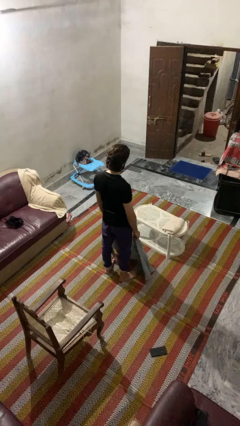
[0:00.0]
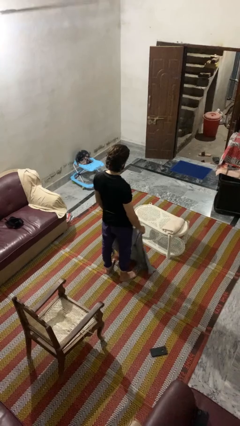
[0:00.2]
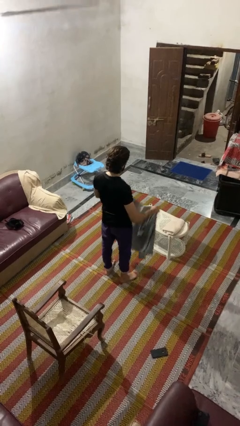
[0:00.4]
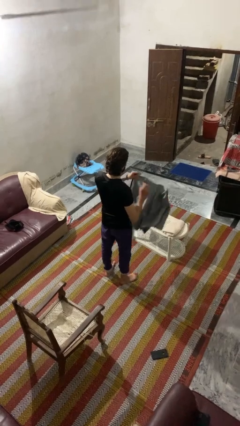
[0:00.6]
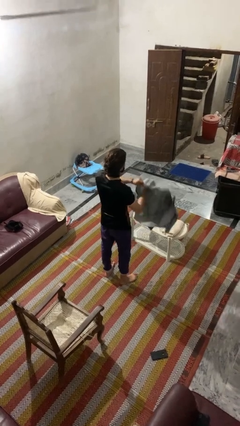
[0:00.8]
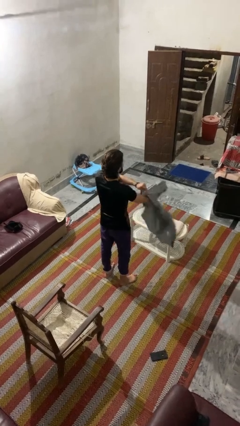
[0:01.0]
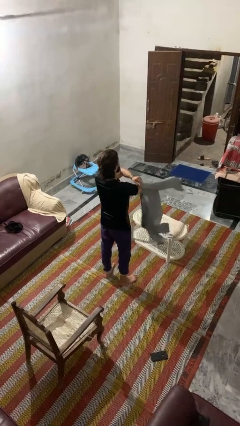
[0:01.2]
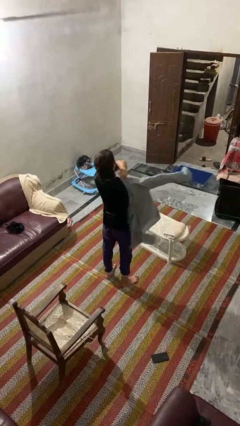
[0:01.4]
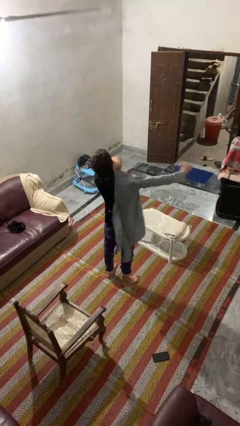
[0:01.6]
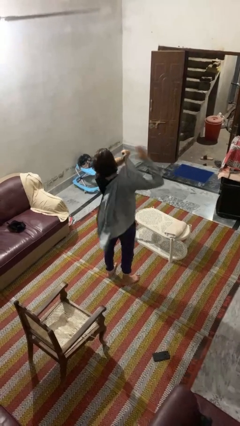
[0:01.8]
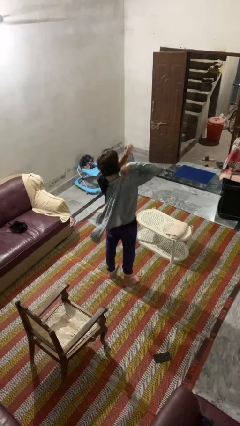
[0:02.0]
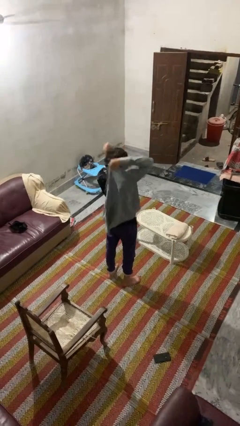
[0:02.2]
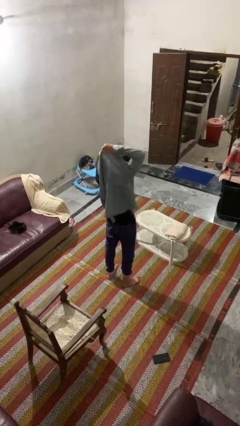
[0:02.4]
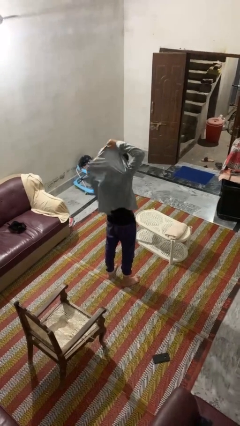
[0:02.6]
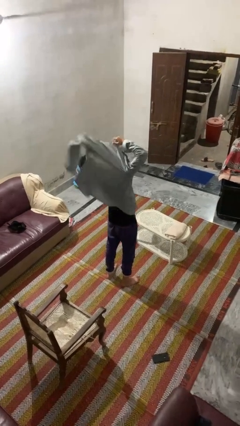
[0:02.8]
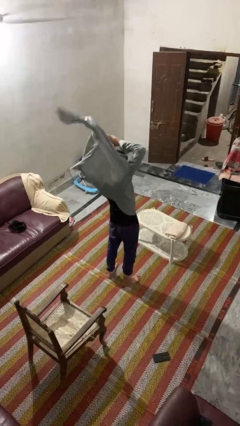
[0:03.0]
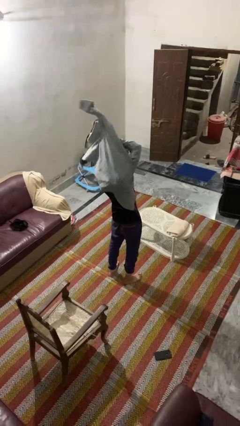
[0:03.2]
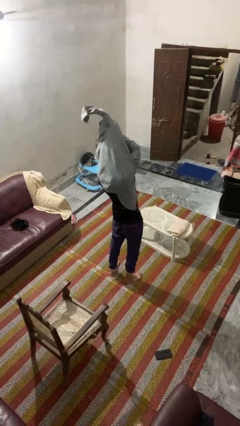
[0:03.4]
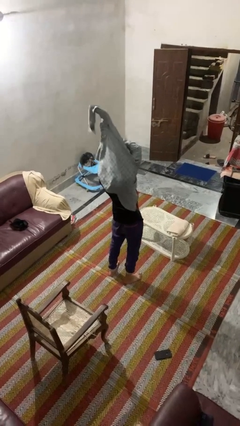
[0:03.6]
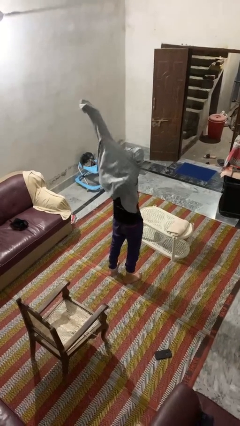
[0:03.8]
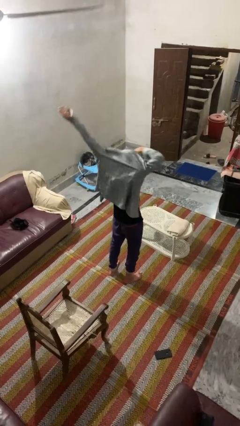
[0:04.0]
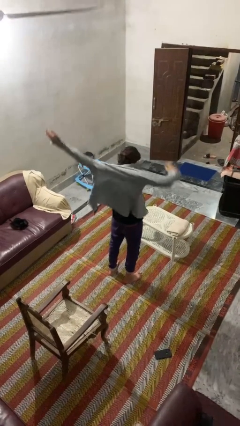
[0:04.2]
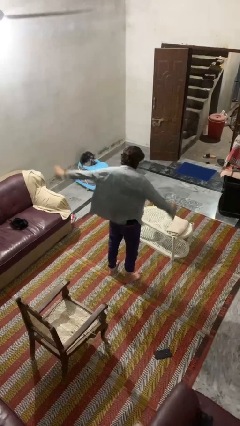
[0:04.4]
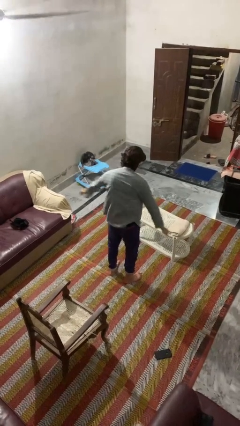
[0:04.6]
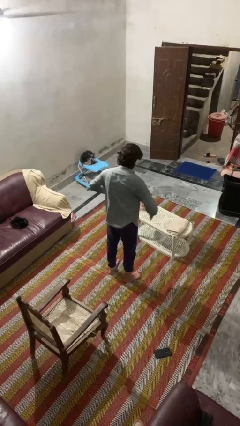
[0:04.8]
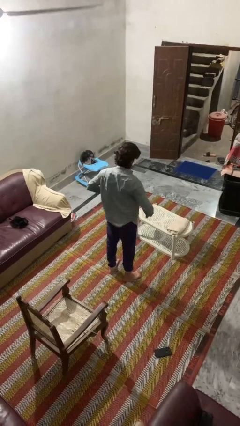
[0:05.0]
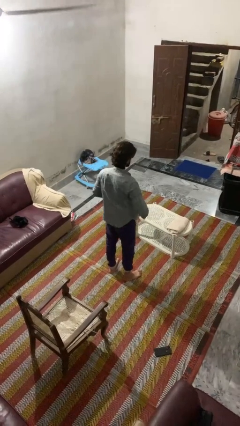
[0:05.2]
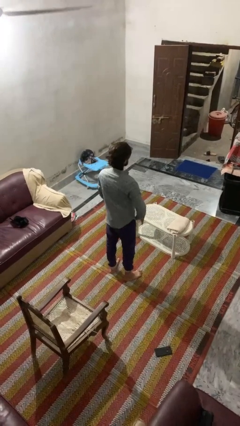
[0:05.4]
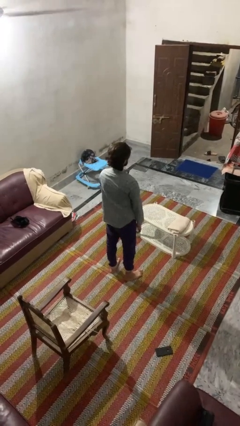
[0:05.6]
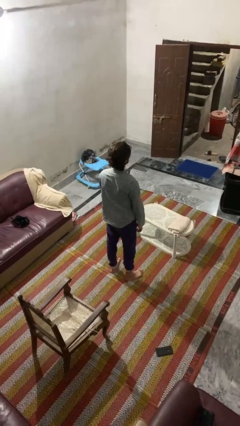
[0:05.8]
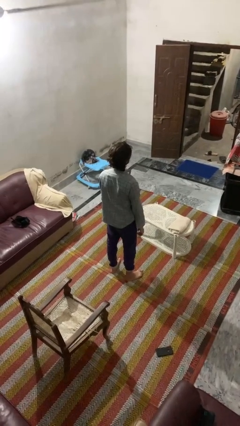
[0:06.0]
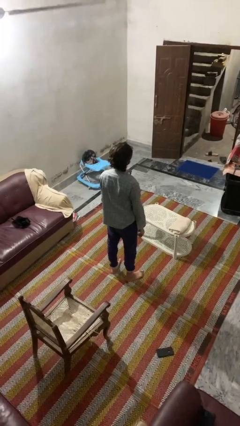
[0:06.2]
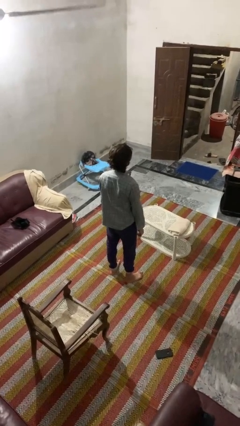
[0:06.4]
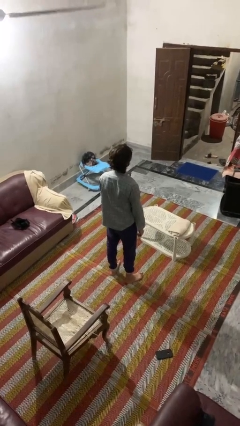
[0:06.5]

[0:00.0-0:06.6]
person puts on shirt

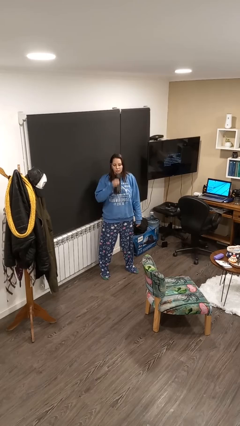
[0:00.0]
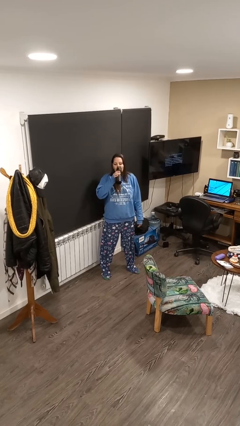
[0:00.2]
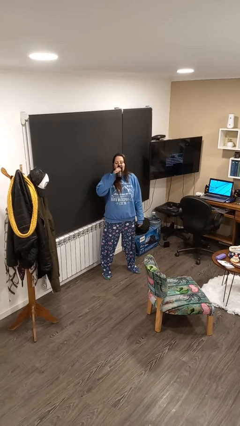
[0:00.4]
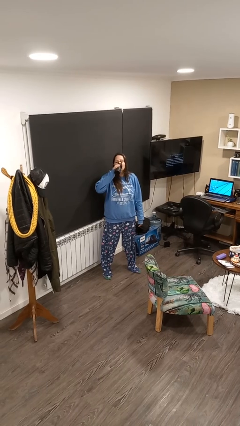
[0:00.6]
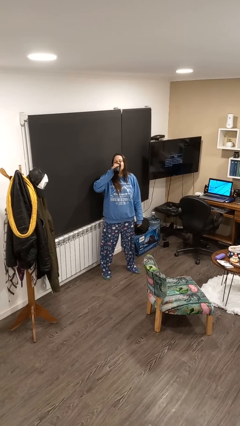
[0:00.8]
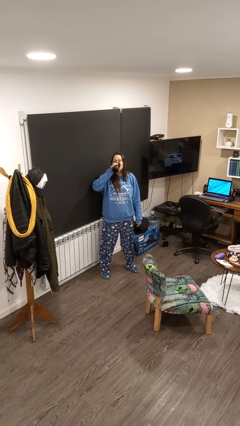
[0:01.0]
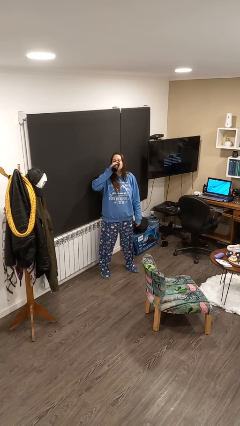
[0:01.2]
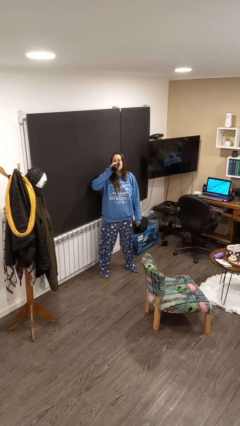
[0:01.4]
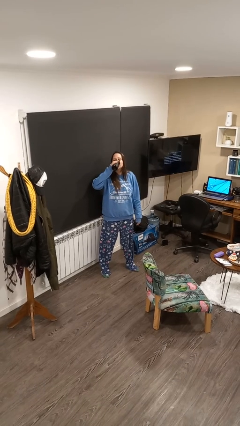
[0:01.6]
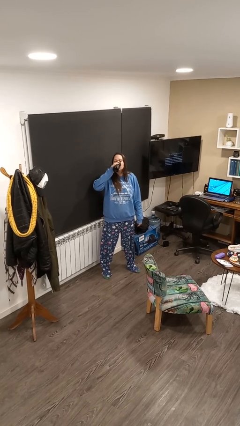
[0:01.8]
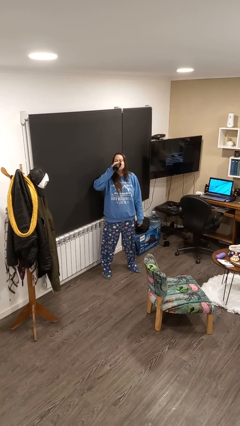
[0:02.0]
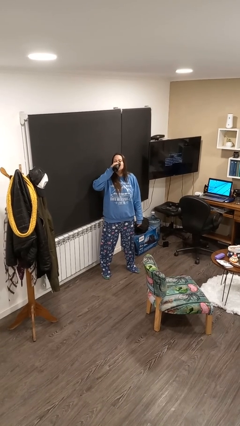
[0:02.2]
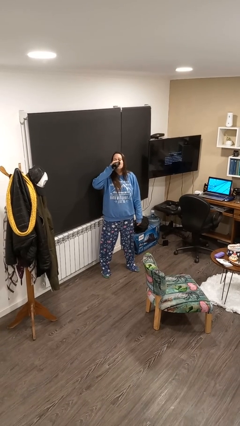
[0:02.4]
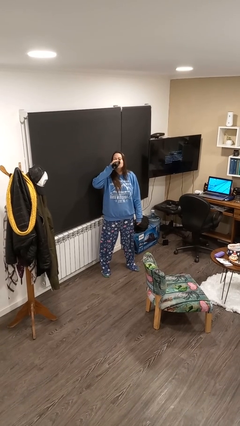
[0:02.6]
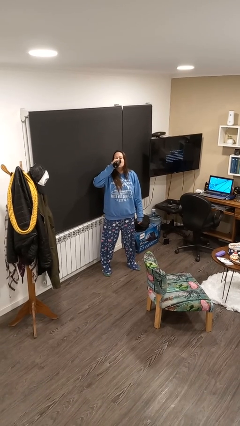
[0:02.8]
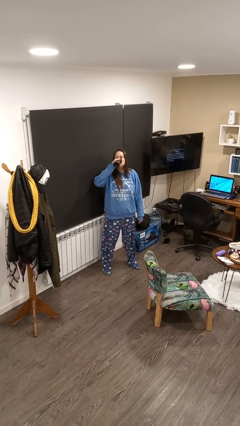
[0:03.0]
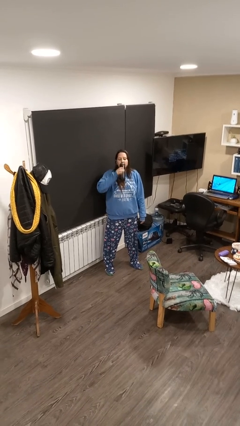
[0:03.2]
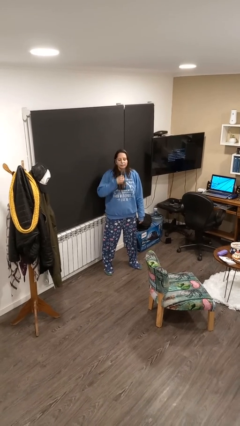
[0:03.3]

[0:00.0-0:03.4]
person drinks from bottle

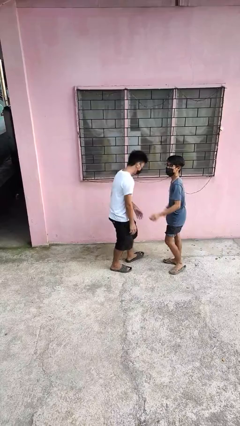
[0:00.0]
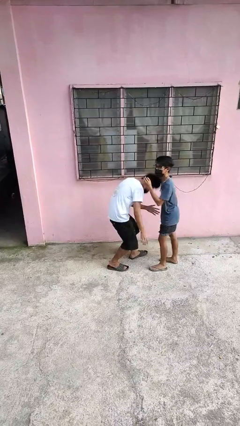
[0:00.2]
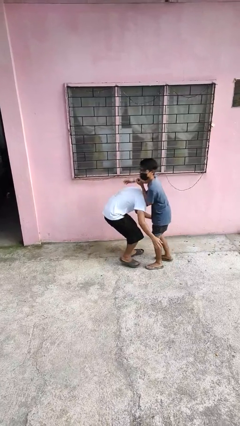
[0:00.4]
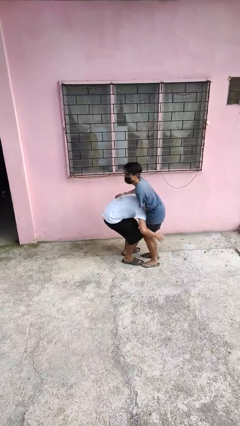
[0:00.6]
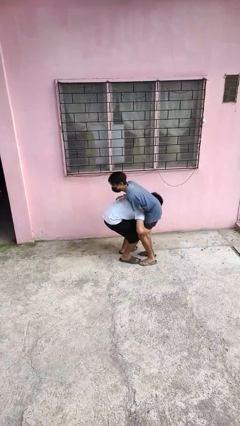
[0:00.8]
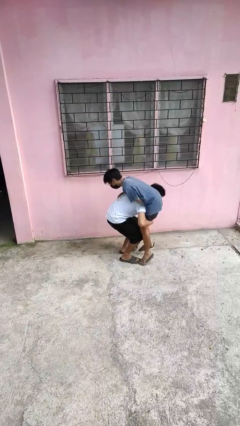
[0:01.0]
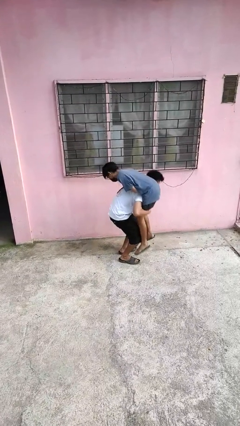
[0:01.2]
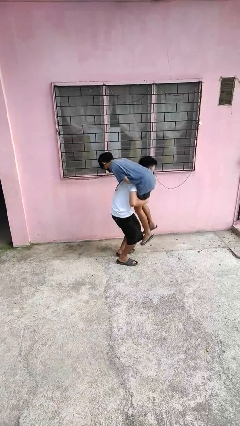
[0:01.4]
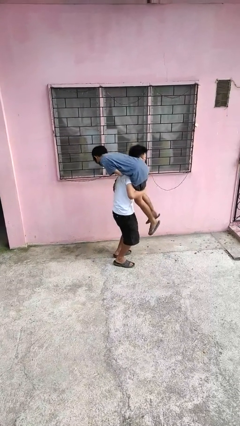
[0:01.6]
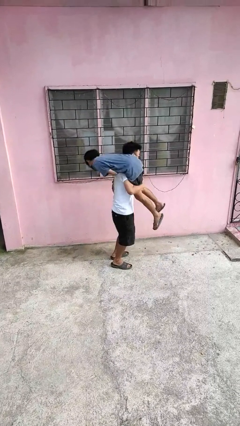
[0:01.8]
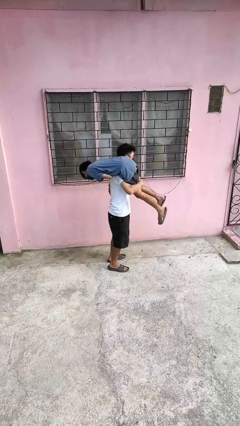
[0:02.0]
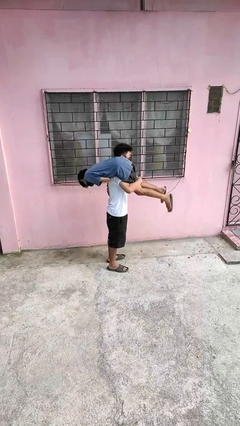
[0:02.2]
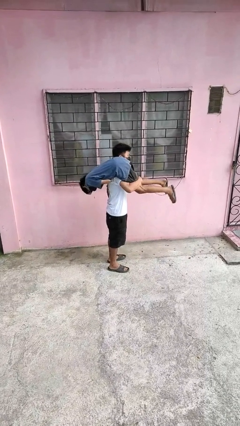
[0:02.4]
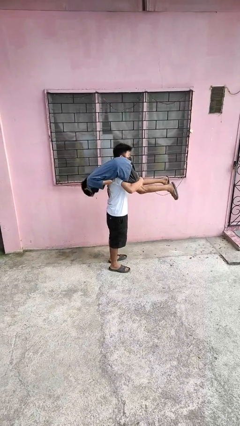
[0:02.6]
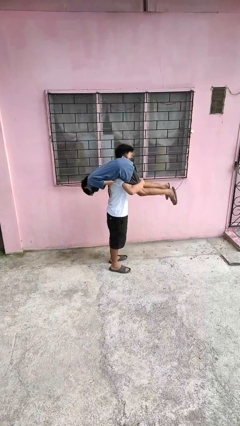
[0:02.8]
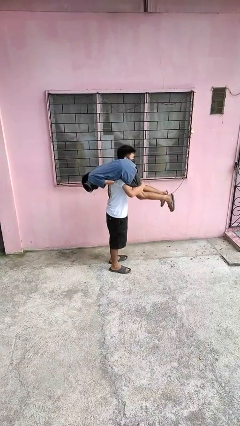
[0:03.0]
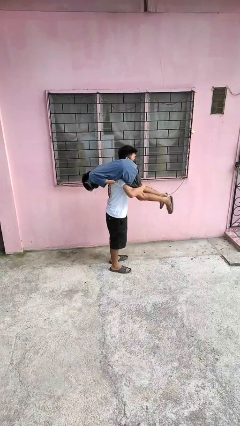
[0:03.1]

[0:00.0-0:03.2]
person carries person over shoulder

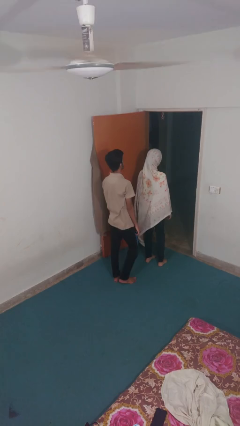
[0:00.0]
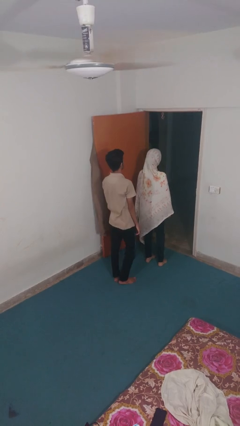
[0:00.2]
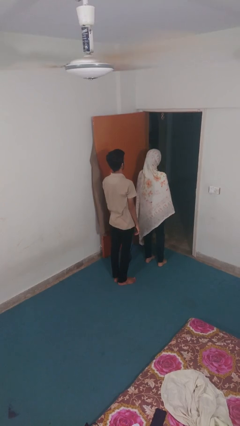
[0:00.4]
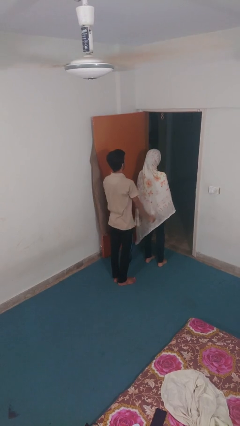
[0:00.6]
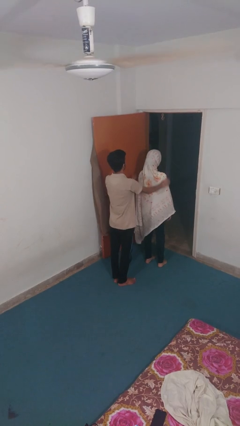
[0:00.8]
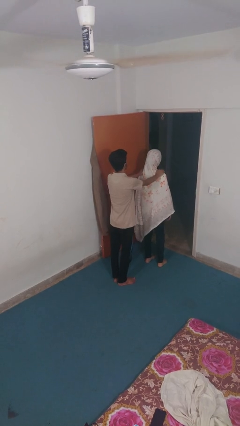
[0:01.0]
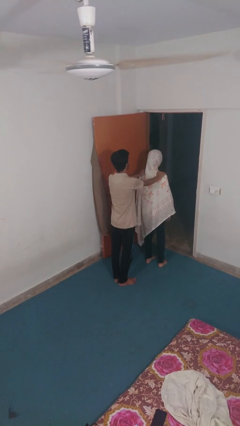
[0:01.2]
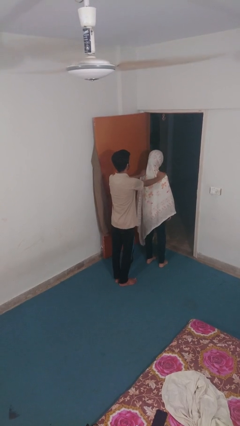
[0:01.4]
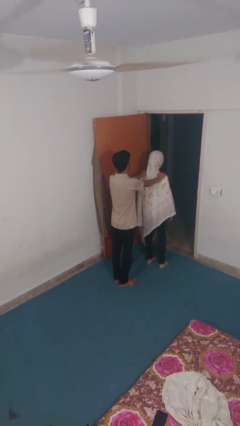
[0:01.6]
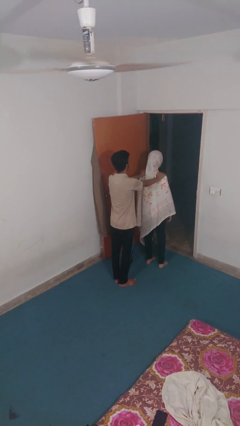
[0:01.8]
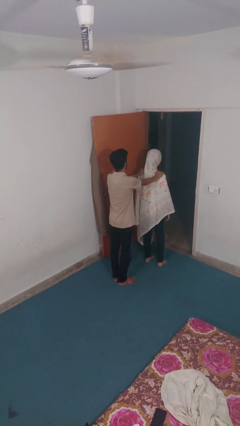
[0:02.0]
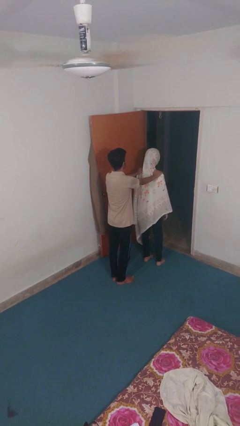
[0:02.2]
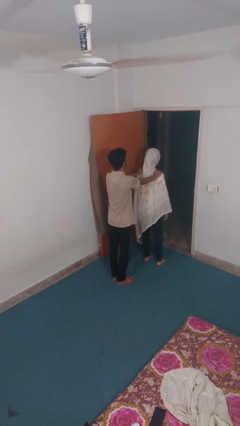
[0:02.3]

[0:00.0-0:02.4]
person grabs person by shoulder

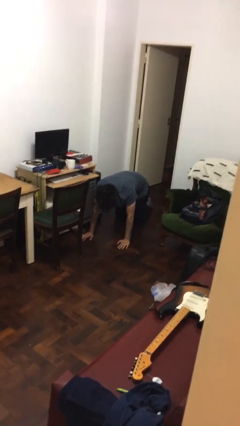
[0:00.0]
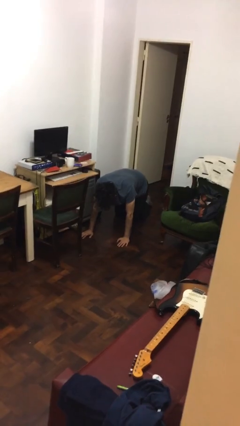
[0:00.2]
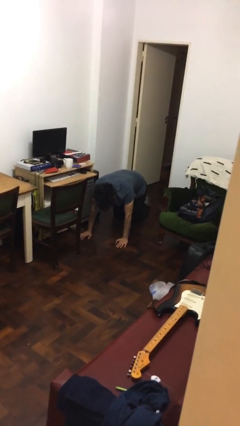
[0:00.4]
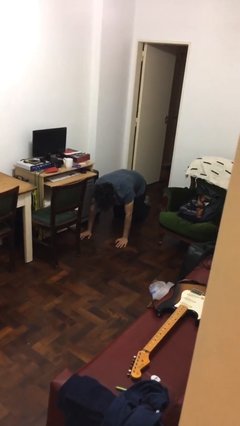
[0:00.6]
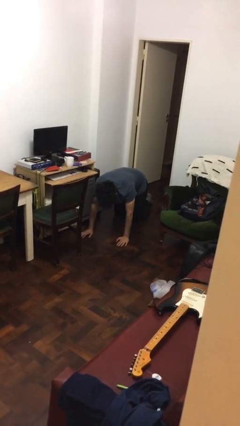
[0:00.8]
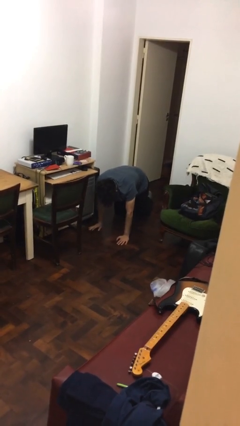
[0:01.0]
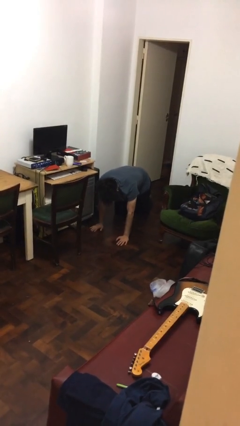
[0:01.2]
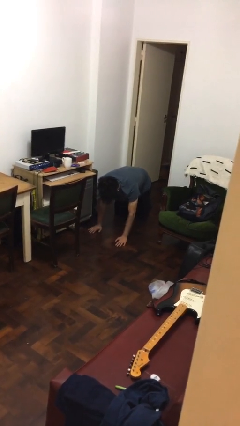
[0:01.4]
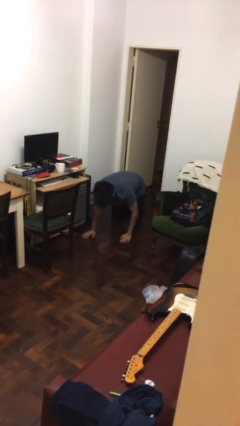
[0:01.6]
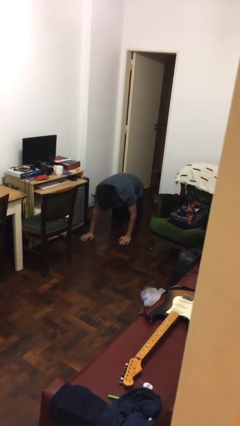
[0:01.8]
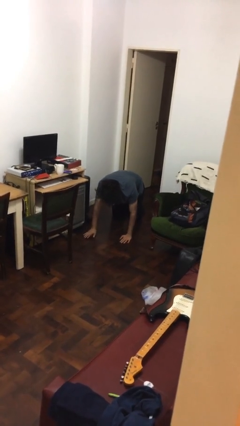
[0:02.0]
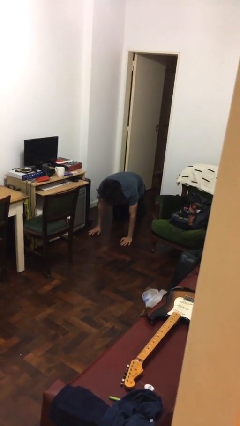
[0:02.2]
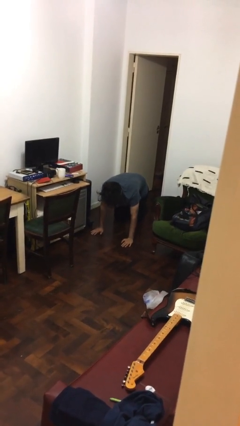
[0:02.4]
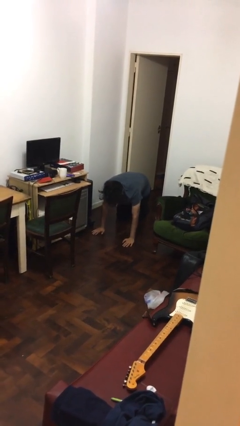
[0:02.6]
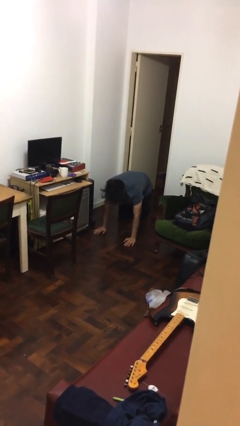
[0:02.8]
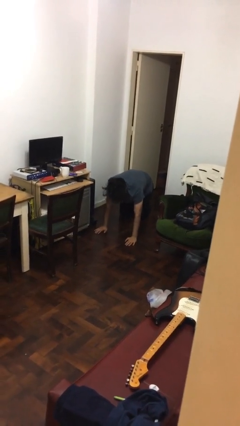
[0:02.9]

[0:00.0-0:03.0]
person crawls
